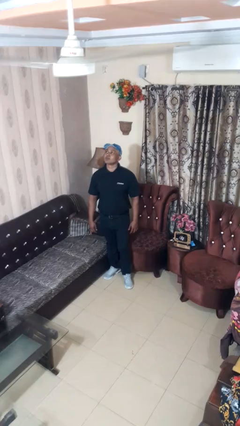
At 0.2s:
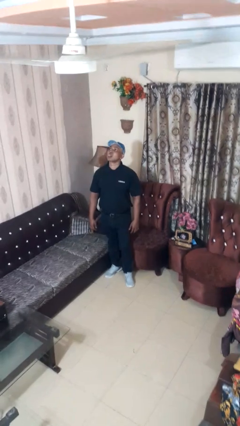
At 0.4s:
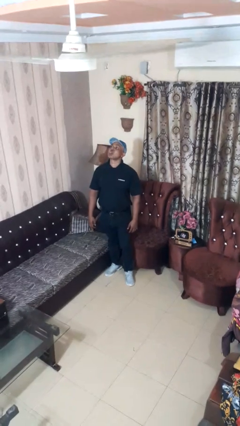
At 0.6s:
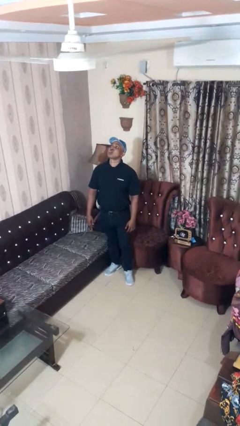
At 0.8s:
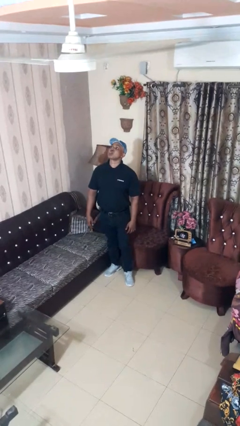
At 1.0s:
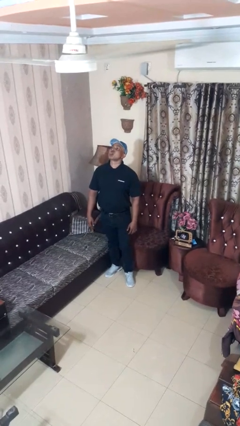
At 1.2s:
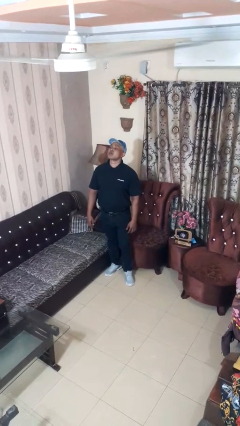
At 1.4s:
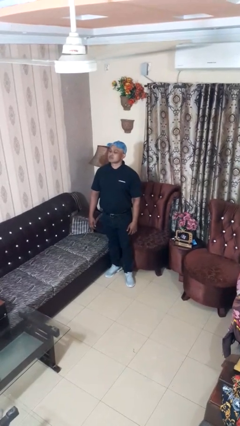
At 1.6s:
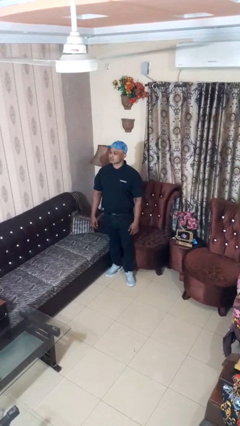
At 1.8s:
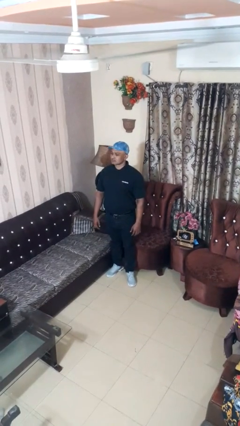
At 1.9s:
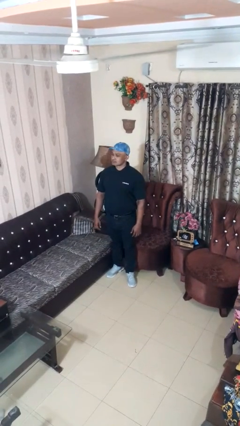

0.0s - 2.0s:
person sticks out tongue

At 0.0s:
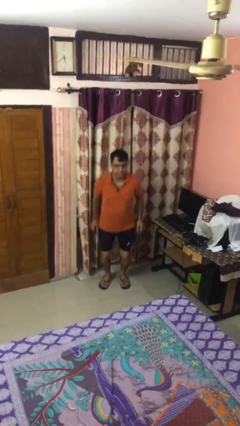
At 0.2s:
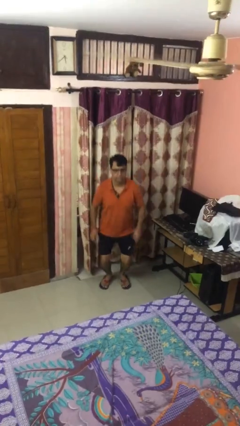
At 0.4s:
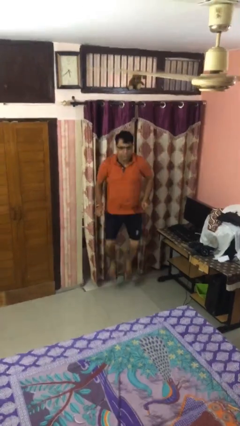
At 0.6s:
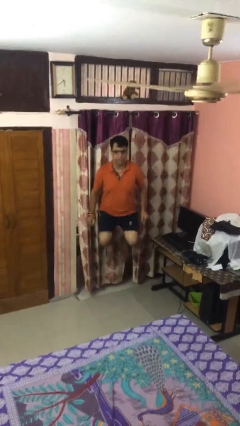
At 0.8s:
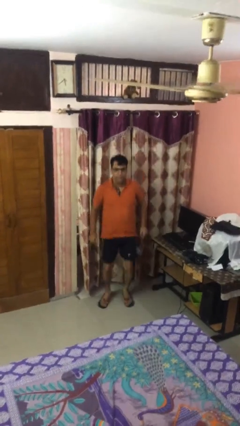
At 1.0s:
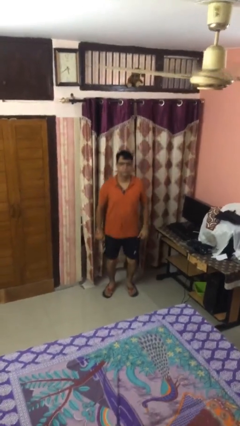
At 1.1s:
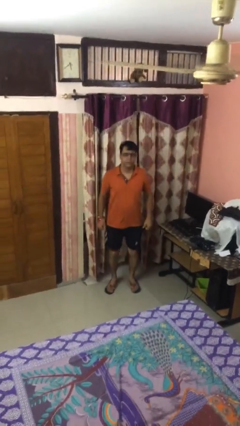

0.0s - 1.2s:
person jumps

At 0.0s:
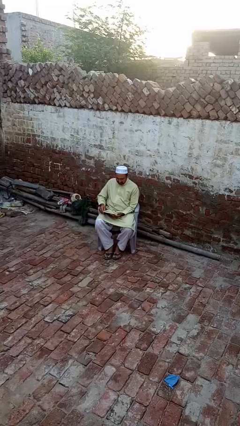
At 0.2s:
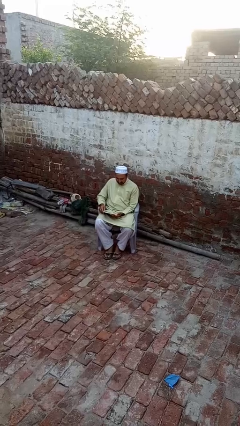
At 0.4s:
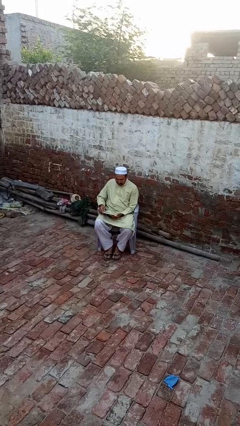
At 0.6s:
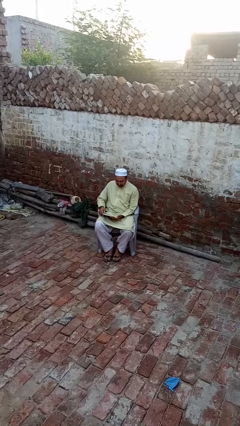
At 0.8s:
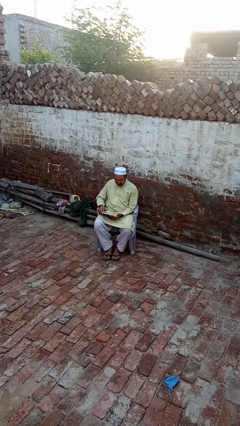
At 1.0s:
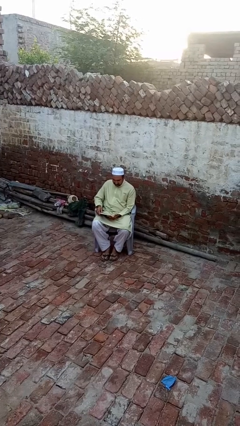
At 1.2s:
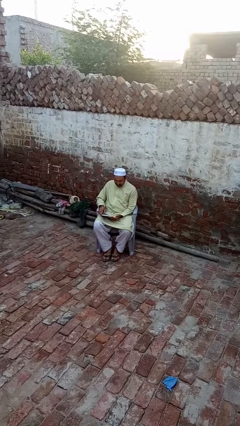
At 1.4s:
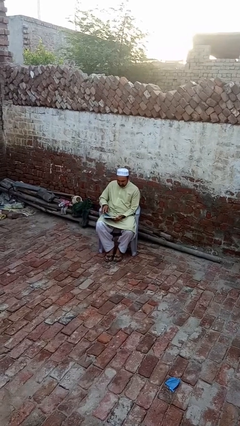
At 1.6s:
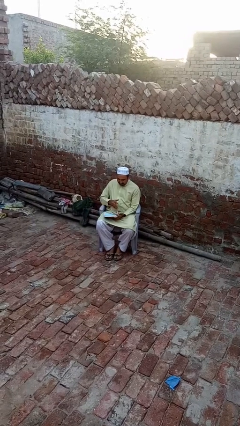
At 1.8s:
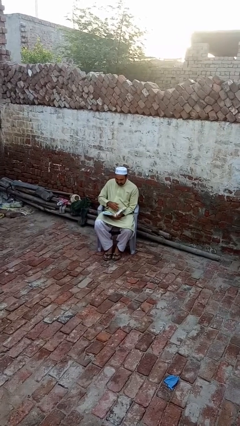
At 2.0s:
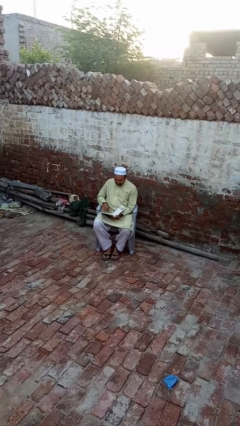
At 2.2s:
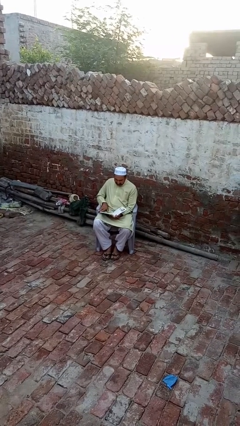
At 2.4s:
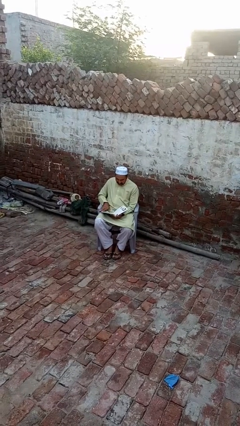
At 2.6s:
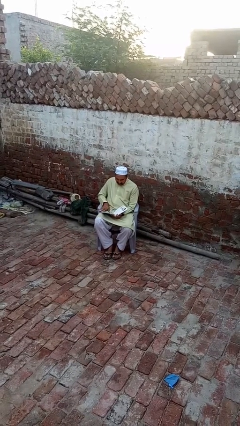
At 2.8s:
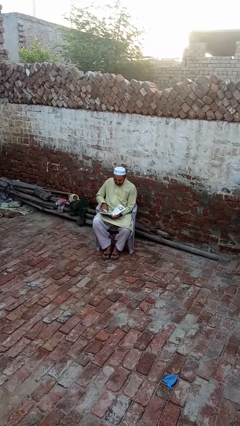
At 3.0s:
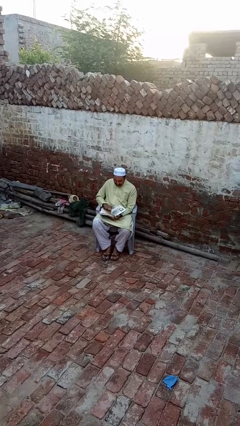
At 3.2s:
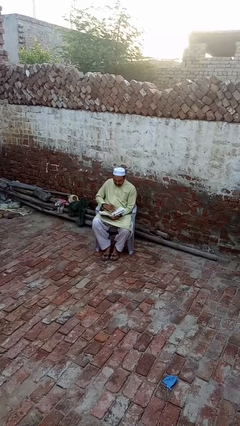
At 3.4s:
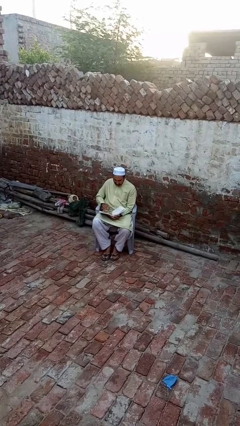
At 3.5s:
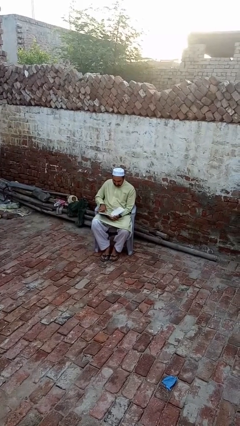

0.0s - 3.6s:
person reads book

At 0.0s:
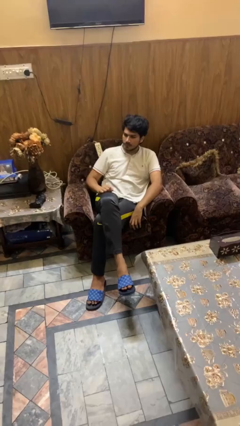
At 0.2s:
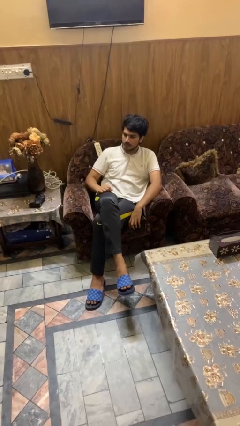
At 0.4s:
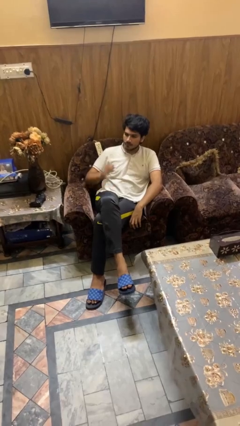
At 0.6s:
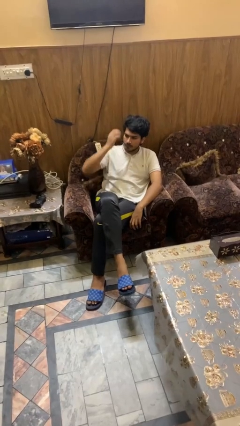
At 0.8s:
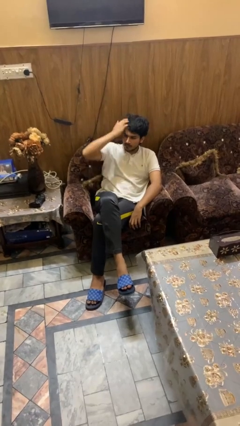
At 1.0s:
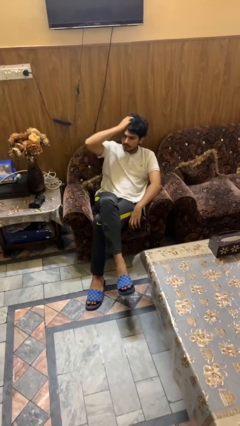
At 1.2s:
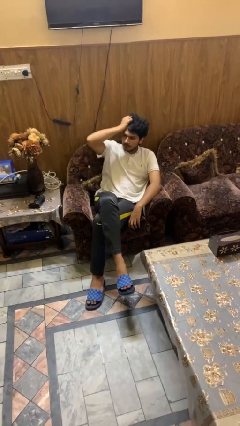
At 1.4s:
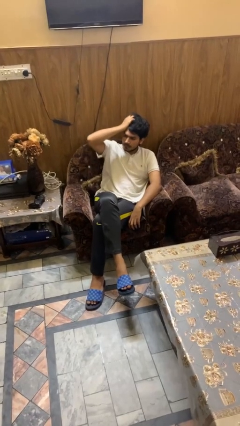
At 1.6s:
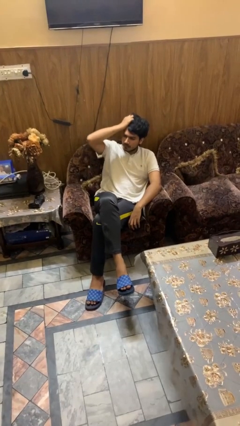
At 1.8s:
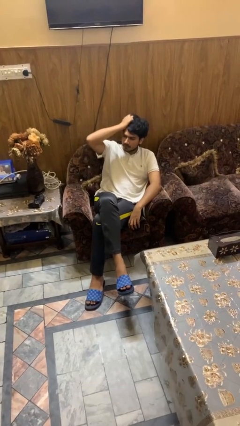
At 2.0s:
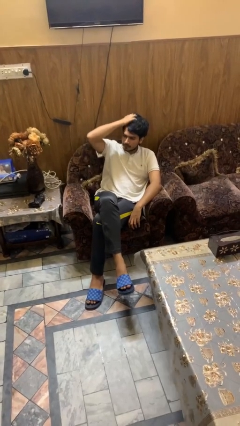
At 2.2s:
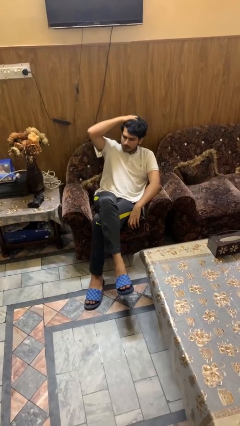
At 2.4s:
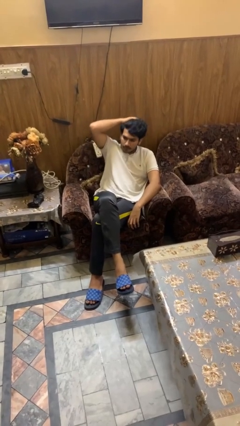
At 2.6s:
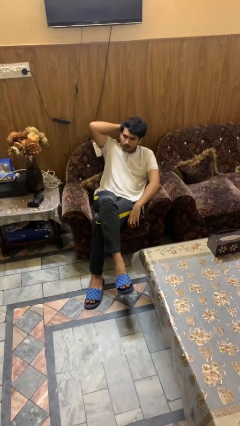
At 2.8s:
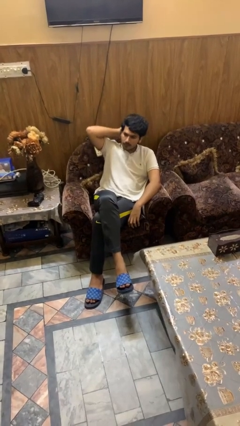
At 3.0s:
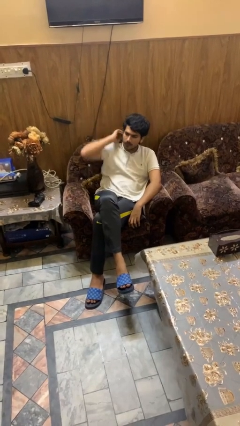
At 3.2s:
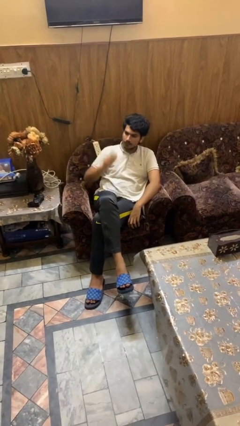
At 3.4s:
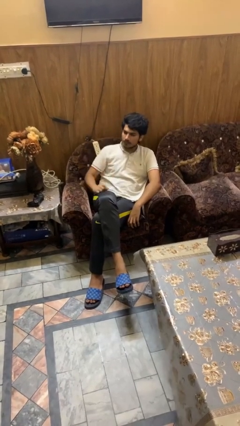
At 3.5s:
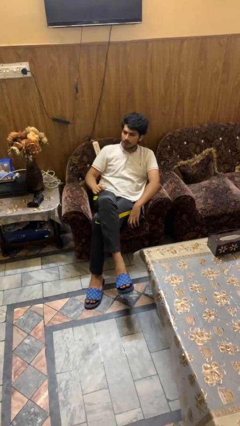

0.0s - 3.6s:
person scratches face

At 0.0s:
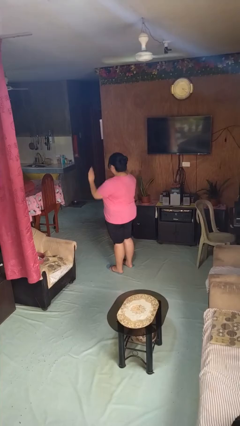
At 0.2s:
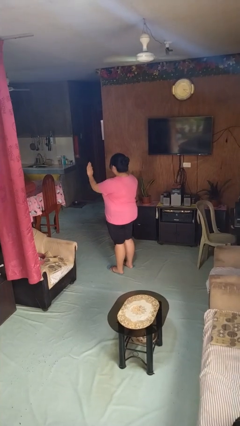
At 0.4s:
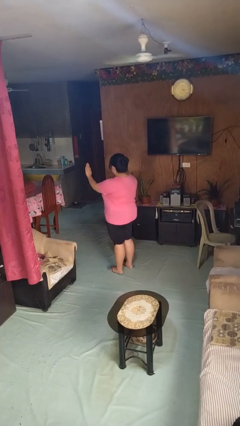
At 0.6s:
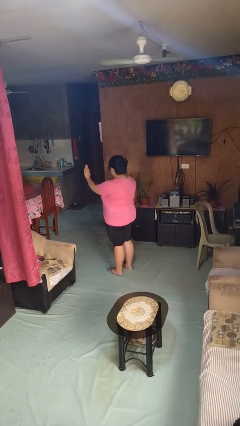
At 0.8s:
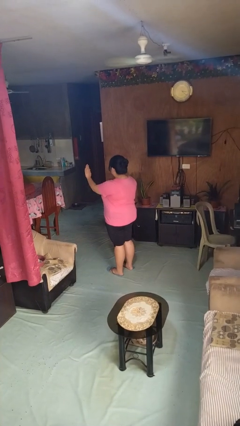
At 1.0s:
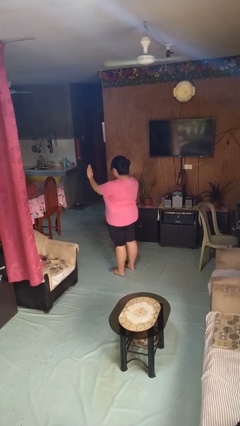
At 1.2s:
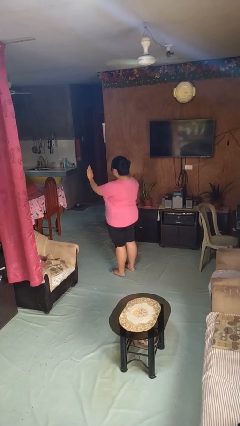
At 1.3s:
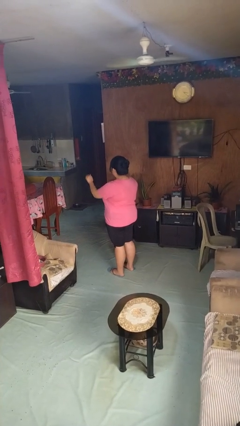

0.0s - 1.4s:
person gestures stop

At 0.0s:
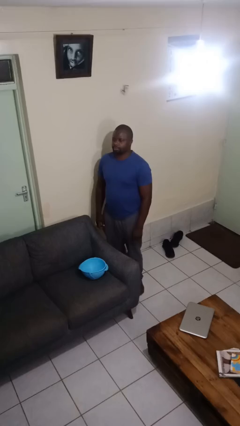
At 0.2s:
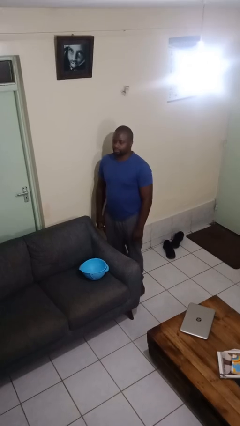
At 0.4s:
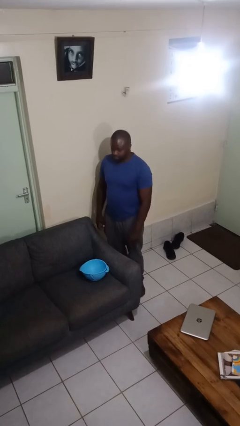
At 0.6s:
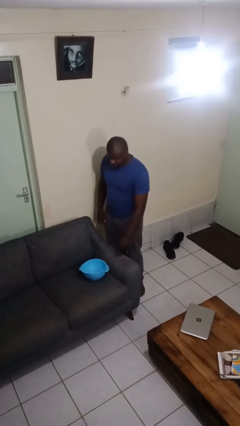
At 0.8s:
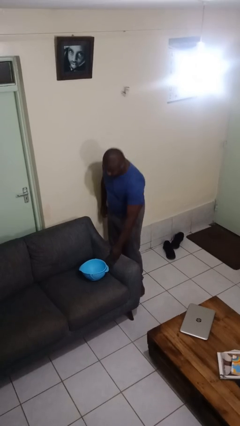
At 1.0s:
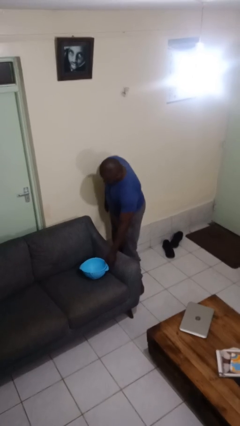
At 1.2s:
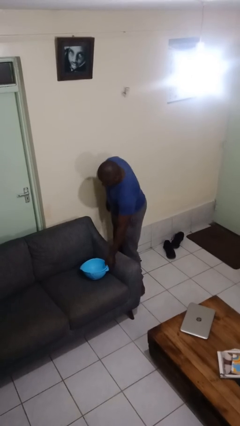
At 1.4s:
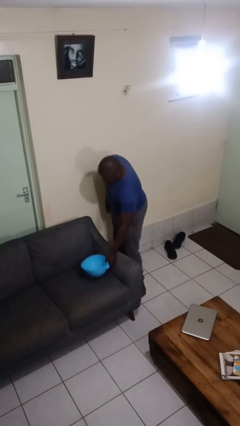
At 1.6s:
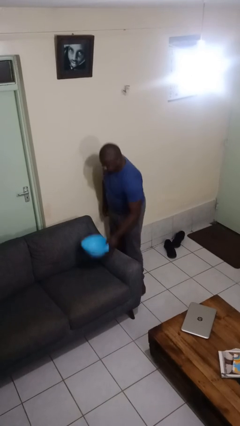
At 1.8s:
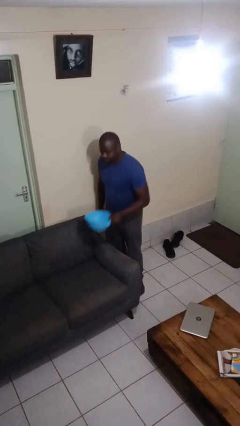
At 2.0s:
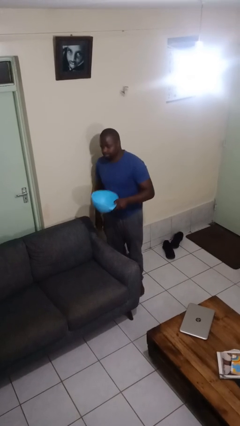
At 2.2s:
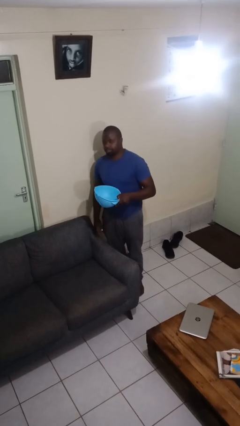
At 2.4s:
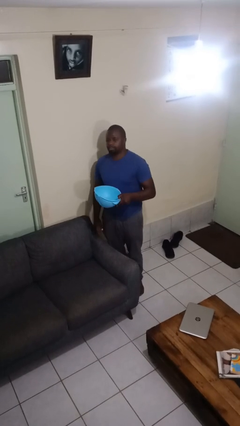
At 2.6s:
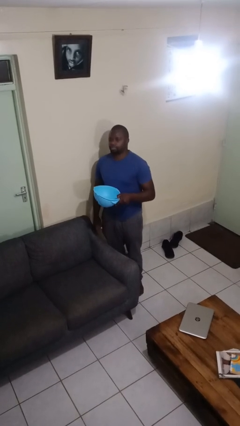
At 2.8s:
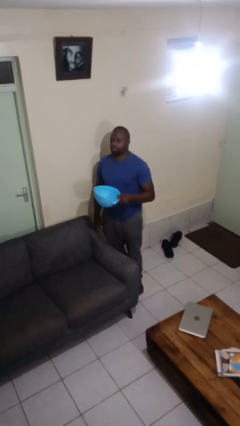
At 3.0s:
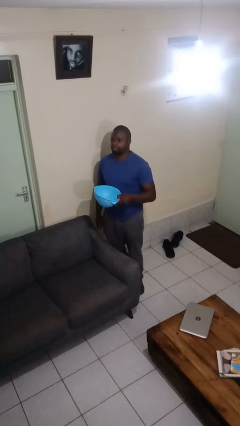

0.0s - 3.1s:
person picks up object from couch

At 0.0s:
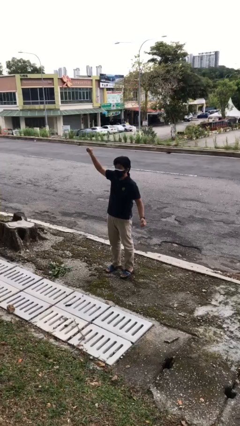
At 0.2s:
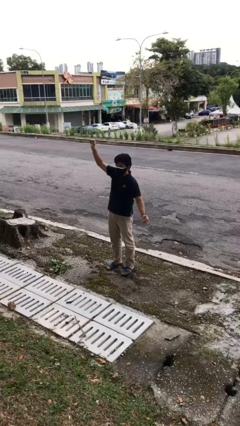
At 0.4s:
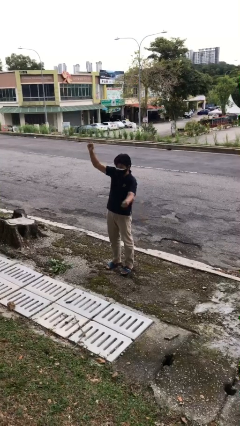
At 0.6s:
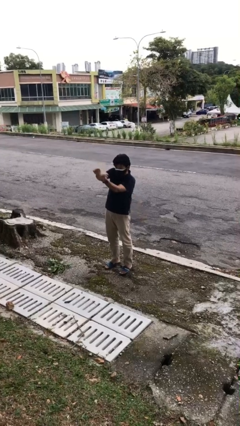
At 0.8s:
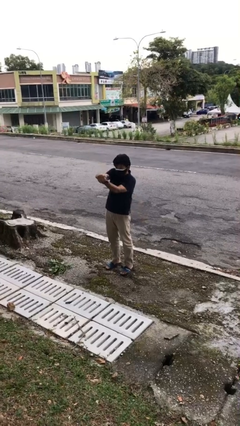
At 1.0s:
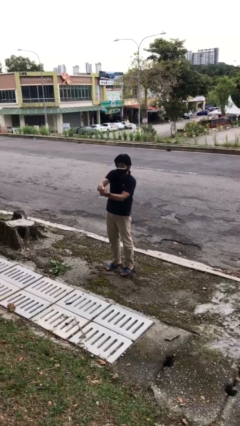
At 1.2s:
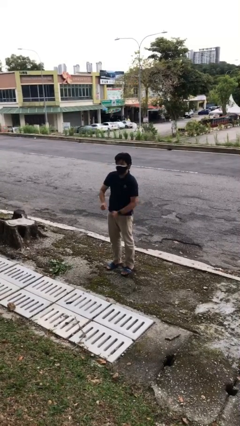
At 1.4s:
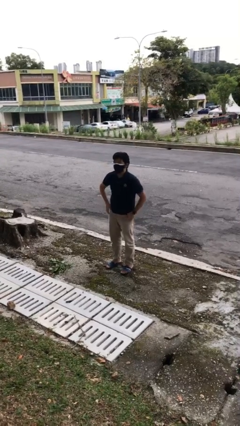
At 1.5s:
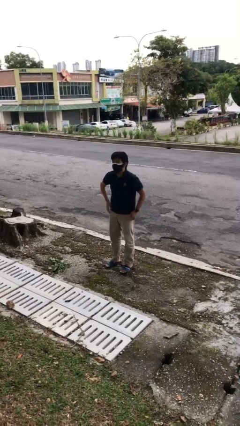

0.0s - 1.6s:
person gestures zoom out

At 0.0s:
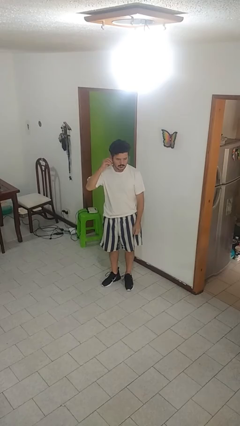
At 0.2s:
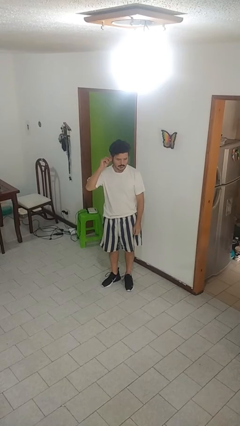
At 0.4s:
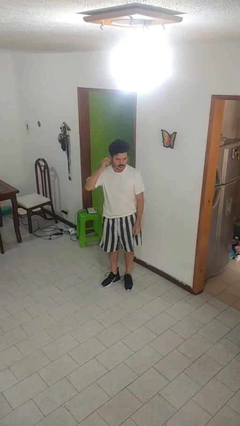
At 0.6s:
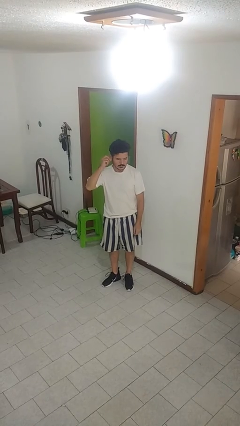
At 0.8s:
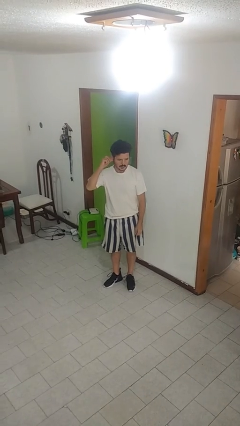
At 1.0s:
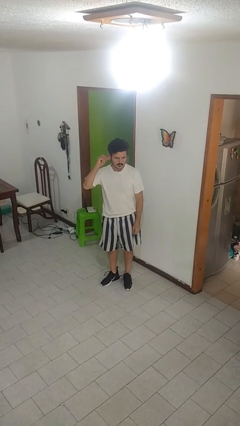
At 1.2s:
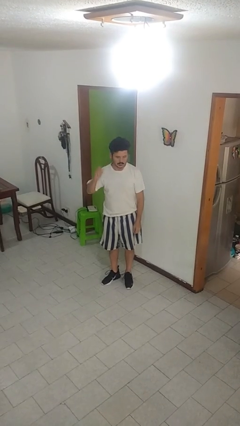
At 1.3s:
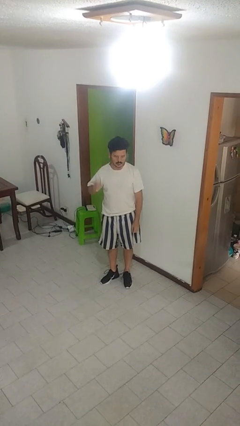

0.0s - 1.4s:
person touches earlobe
